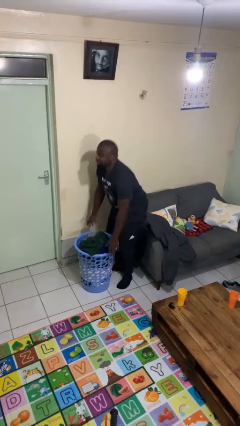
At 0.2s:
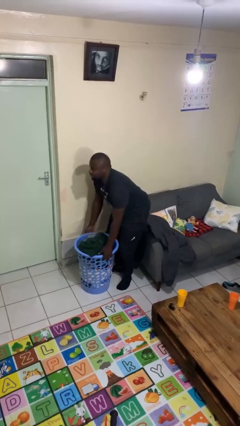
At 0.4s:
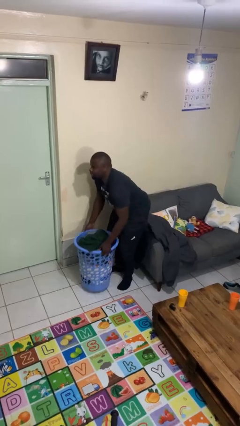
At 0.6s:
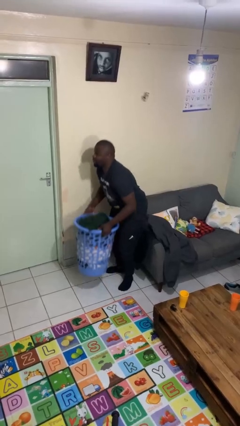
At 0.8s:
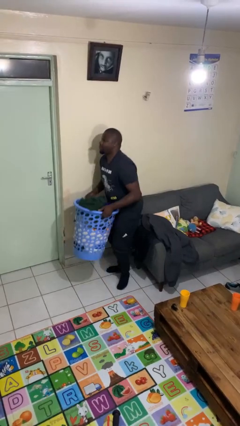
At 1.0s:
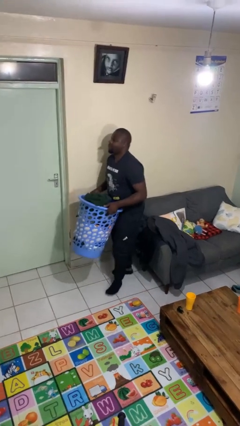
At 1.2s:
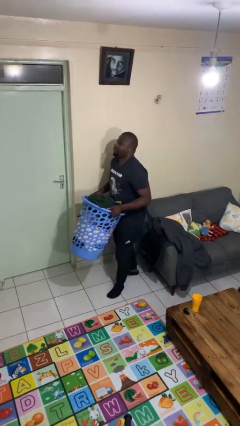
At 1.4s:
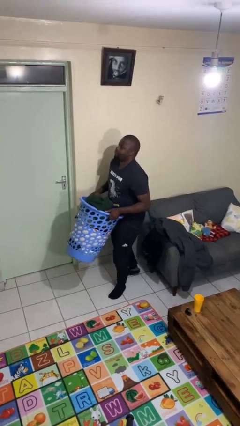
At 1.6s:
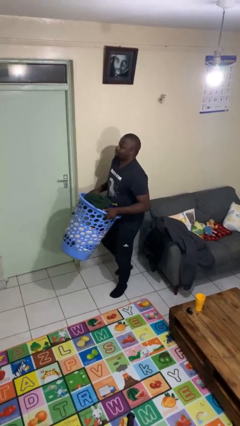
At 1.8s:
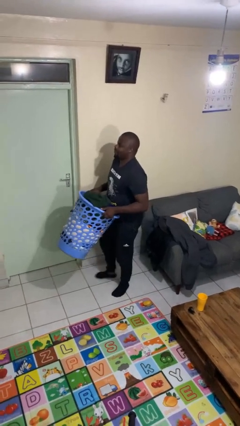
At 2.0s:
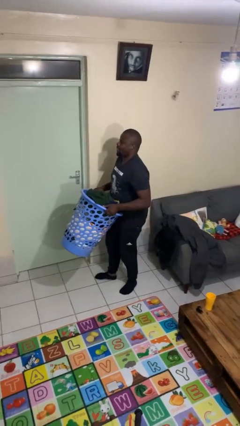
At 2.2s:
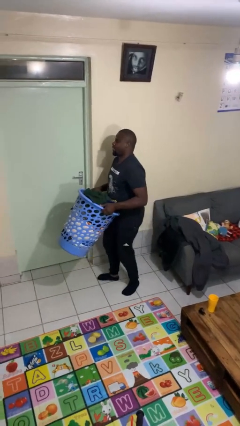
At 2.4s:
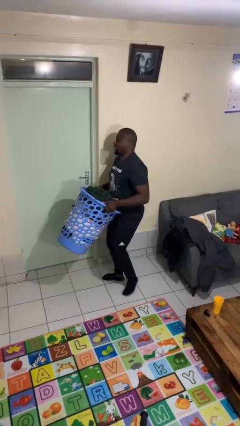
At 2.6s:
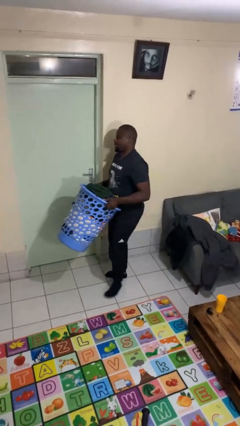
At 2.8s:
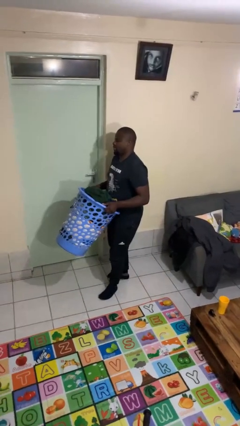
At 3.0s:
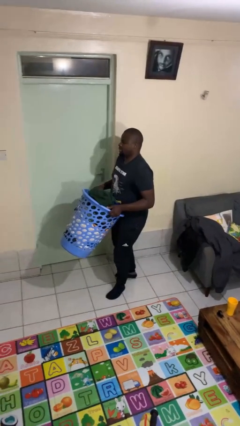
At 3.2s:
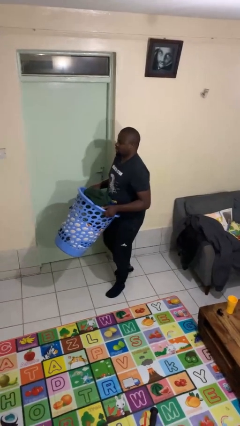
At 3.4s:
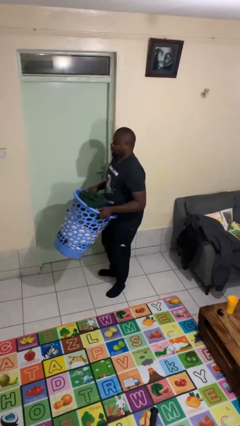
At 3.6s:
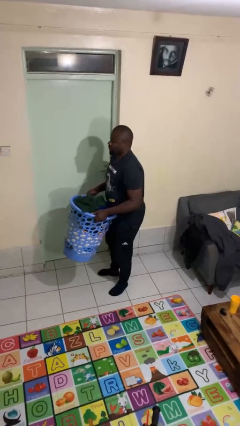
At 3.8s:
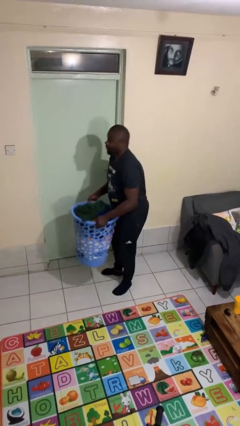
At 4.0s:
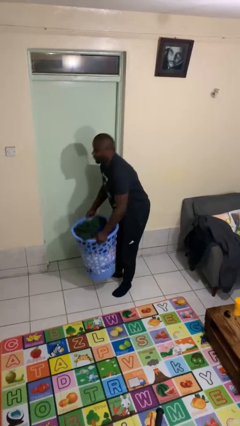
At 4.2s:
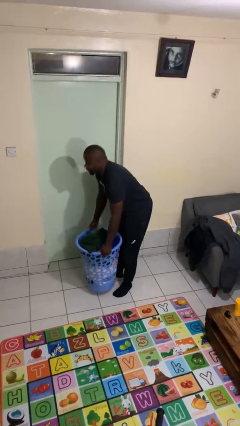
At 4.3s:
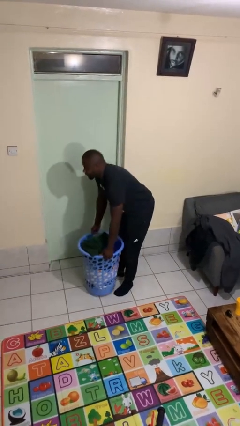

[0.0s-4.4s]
person carries laundry basket

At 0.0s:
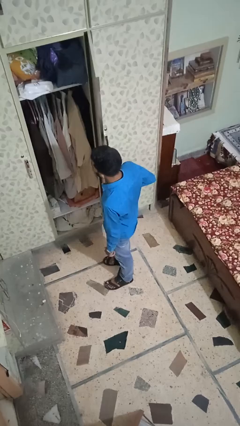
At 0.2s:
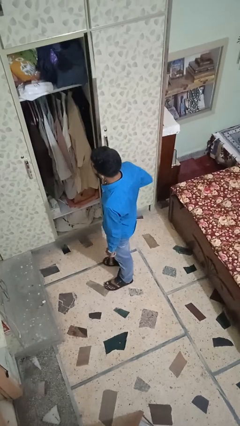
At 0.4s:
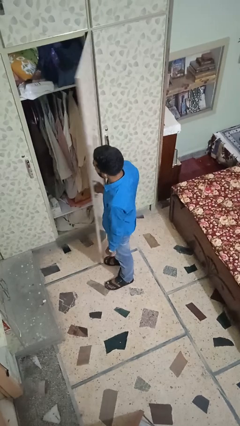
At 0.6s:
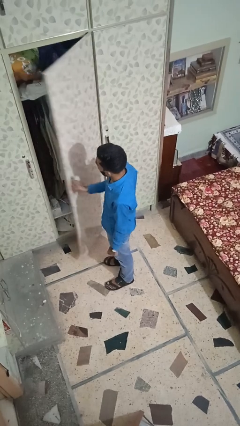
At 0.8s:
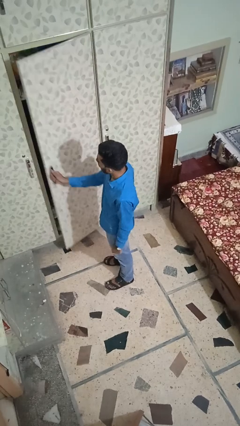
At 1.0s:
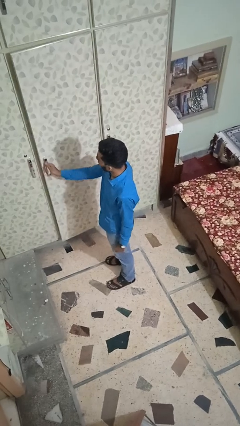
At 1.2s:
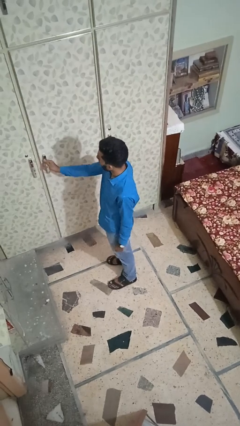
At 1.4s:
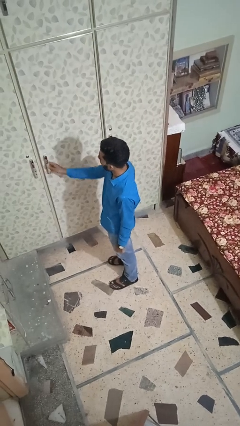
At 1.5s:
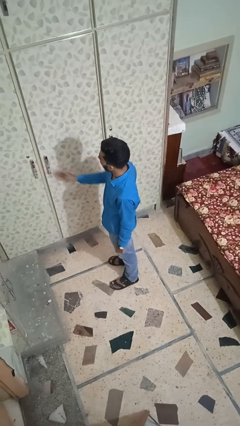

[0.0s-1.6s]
person closes closet door

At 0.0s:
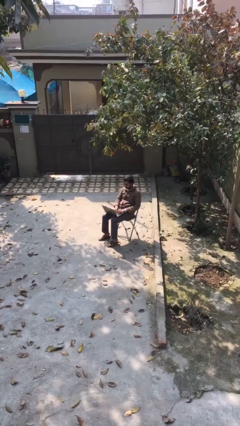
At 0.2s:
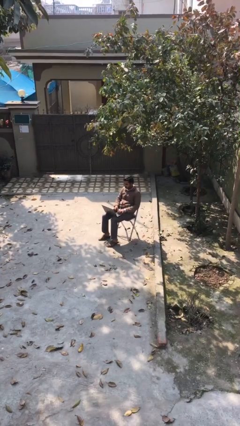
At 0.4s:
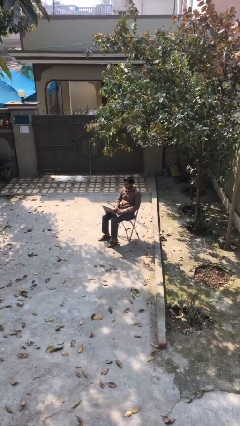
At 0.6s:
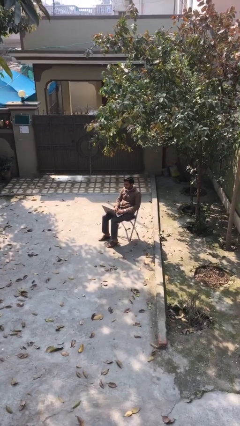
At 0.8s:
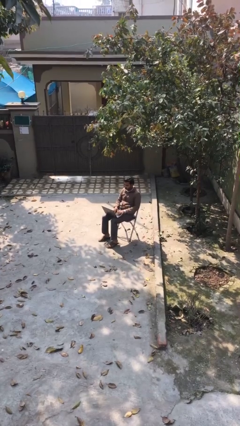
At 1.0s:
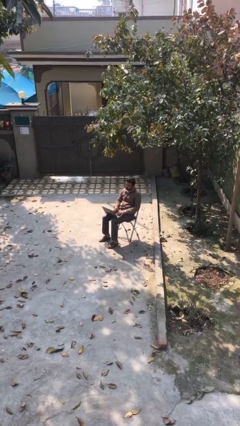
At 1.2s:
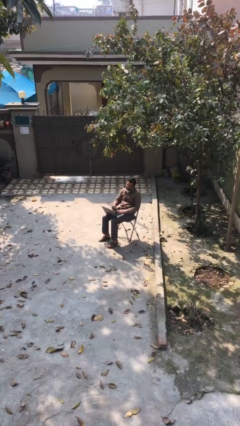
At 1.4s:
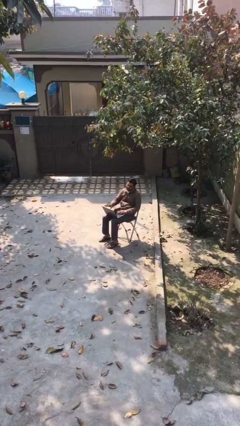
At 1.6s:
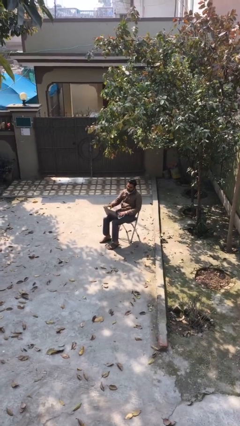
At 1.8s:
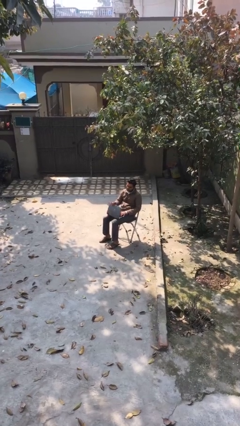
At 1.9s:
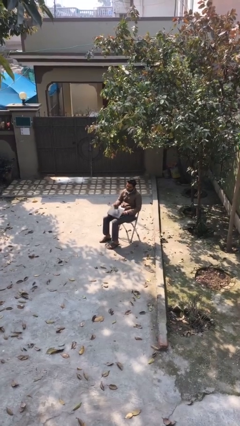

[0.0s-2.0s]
person interacts with laptop

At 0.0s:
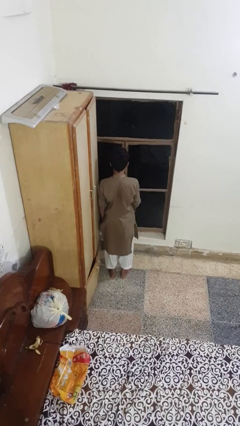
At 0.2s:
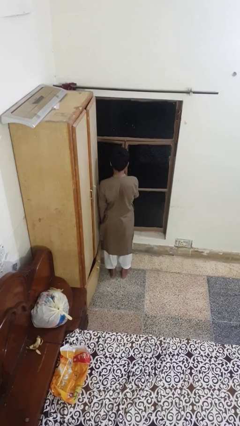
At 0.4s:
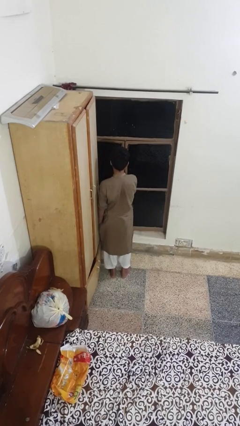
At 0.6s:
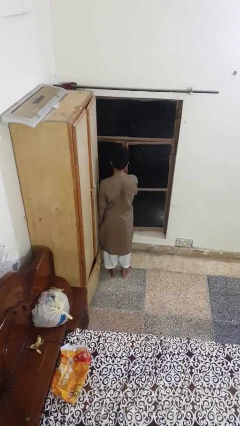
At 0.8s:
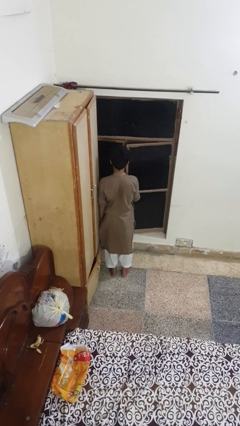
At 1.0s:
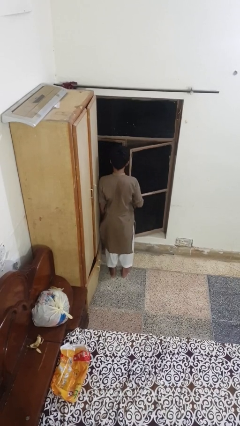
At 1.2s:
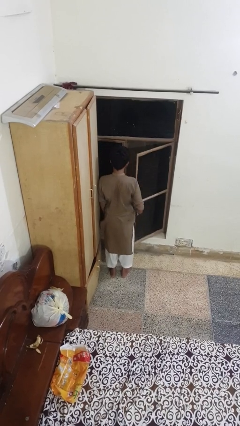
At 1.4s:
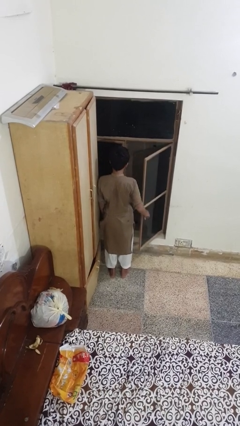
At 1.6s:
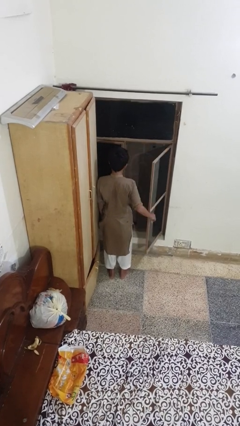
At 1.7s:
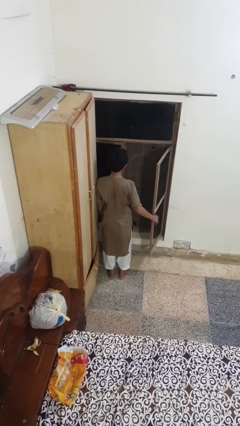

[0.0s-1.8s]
person opens home window

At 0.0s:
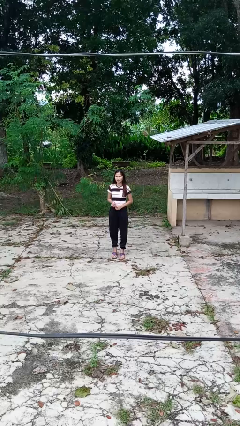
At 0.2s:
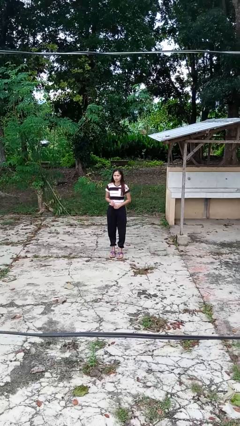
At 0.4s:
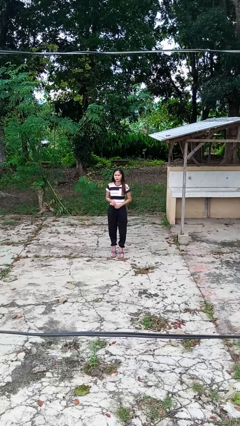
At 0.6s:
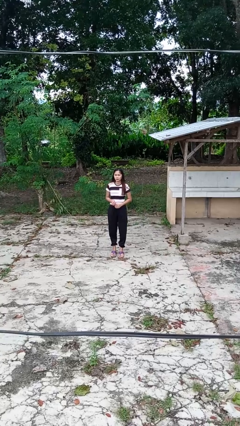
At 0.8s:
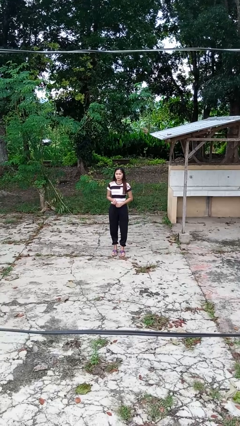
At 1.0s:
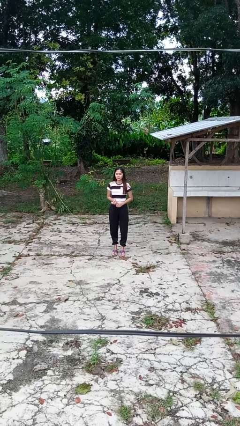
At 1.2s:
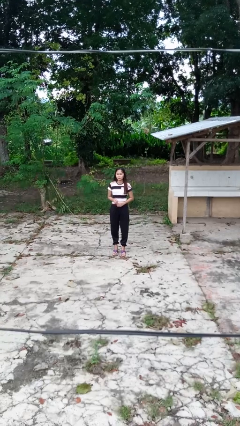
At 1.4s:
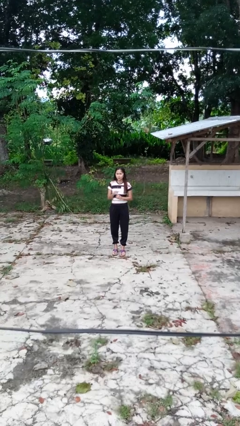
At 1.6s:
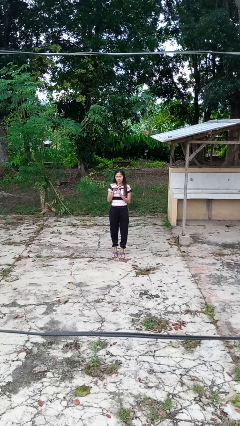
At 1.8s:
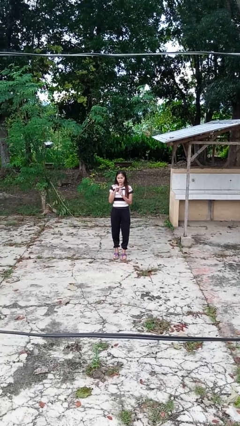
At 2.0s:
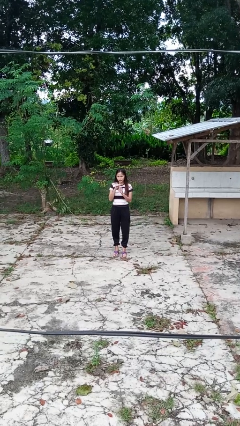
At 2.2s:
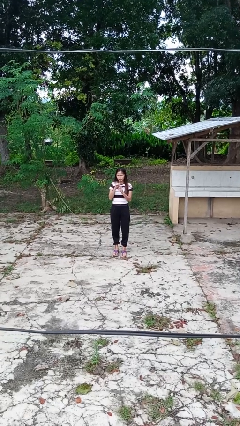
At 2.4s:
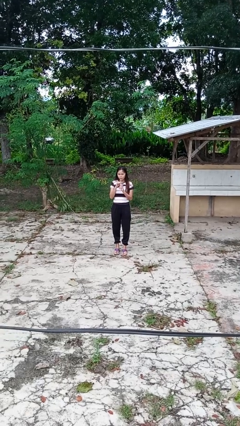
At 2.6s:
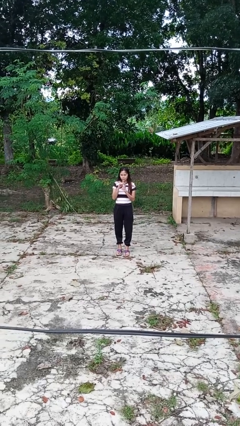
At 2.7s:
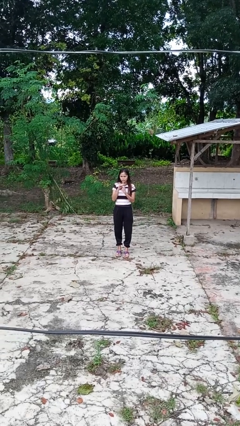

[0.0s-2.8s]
person drinks from straw

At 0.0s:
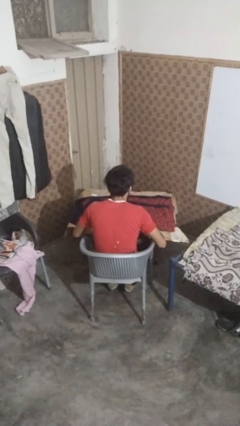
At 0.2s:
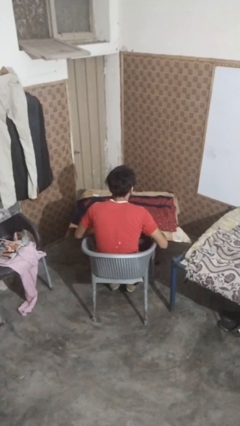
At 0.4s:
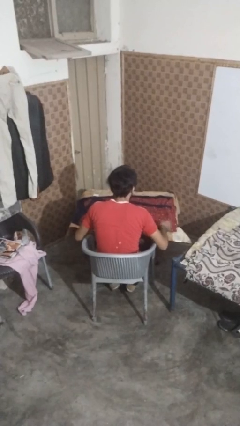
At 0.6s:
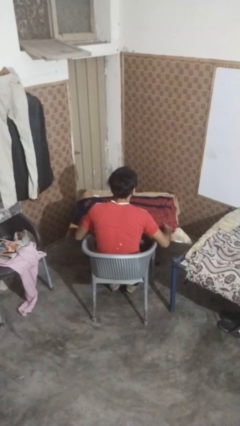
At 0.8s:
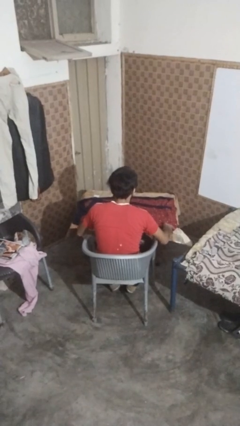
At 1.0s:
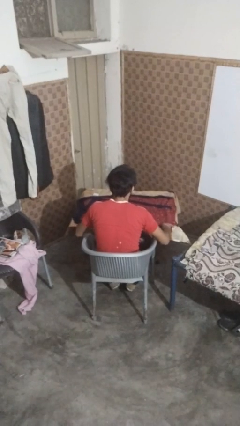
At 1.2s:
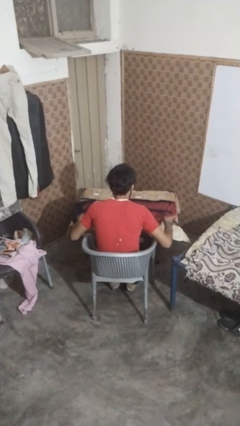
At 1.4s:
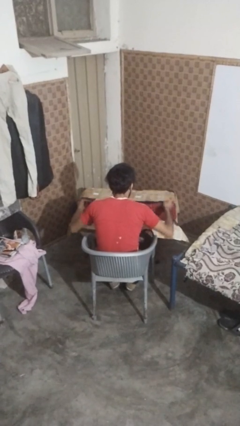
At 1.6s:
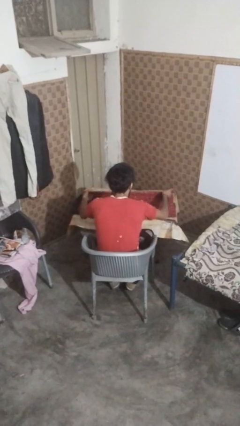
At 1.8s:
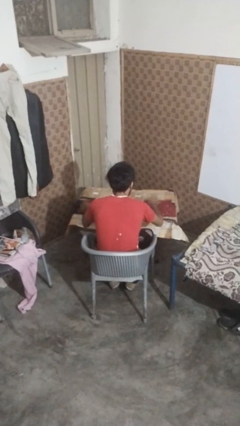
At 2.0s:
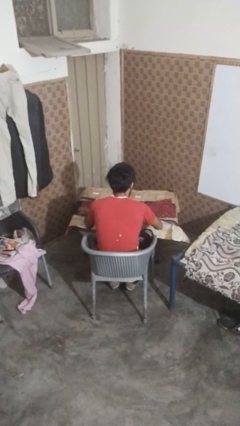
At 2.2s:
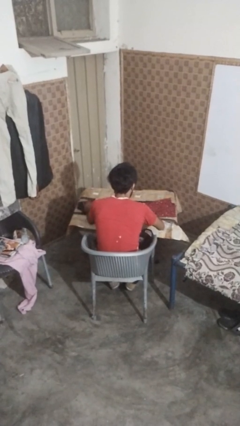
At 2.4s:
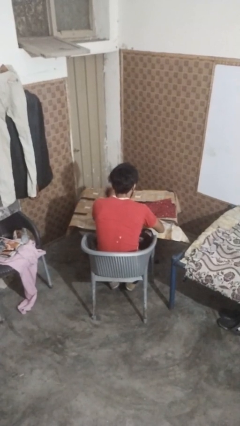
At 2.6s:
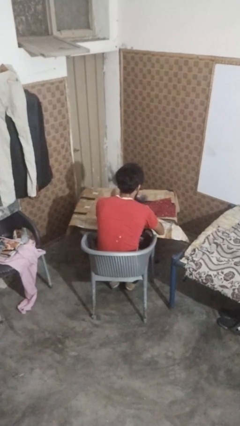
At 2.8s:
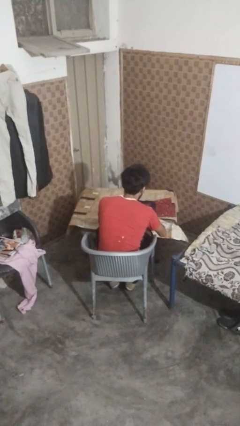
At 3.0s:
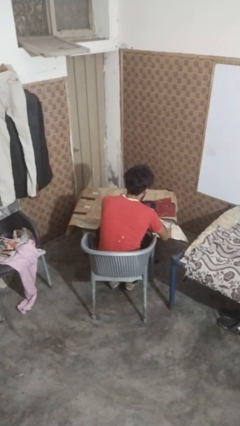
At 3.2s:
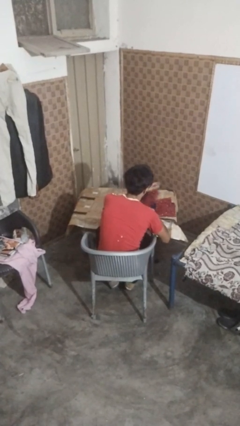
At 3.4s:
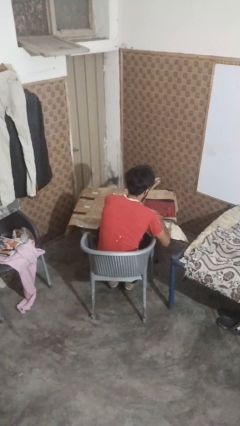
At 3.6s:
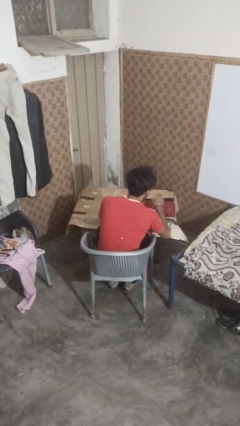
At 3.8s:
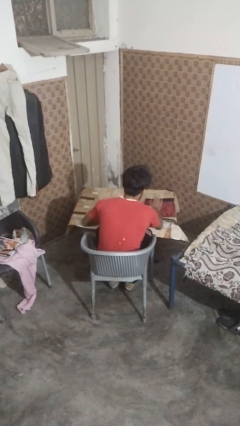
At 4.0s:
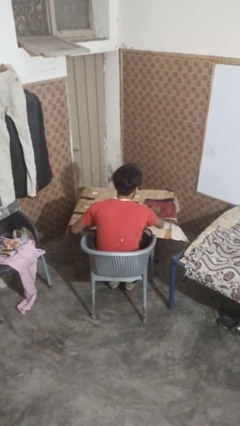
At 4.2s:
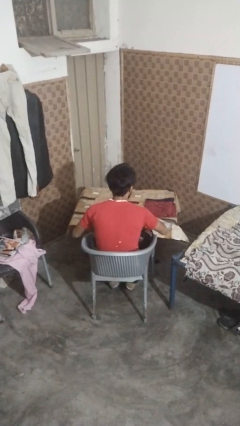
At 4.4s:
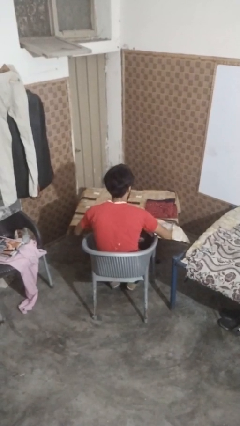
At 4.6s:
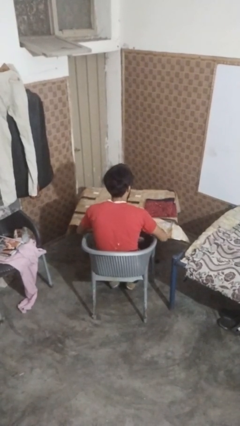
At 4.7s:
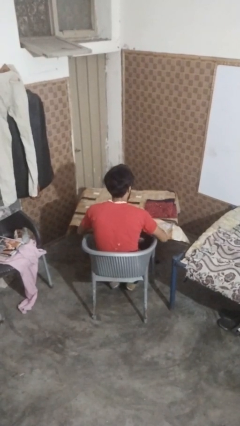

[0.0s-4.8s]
person folds tablecloth
